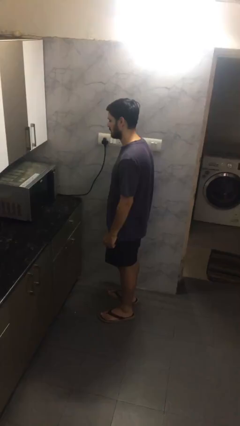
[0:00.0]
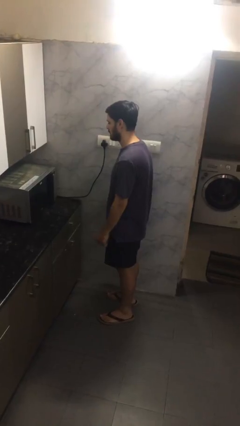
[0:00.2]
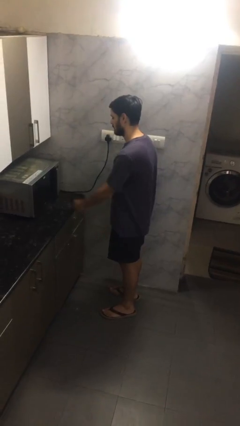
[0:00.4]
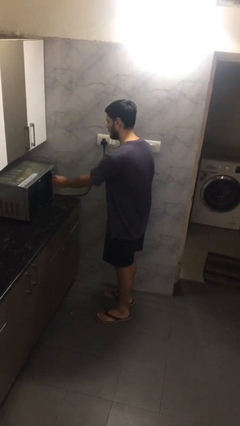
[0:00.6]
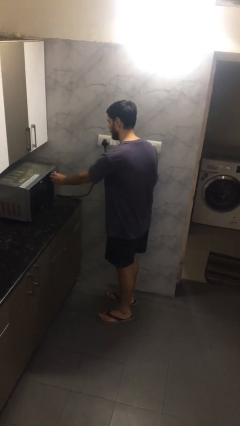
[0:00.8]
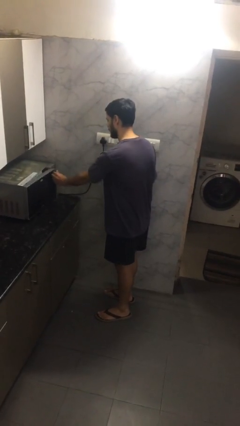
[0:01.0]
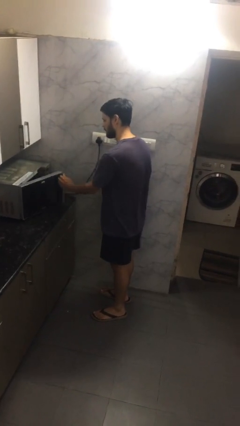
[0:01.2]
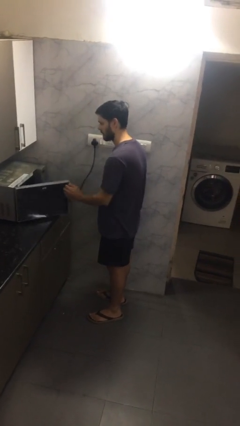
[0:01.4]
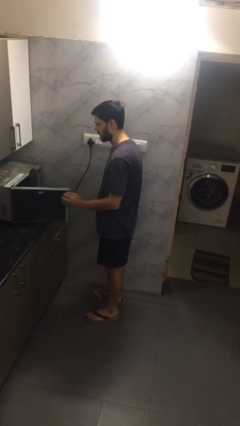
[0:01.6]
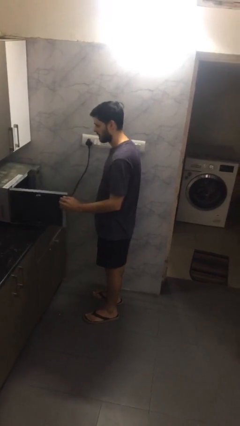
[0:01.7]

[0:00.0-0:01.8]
person opens microwave

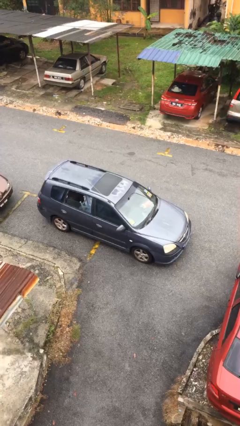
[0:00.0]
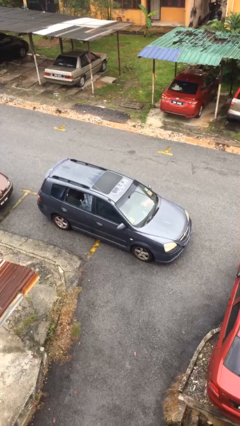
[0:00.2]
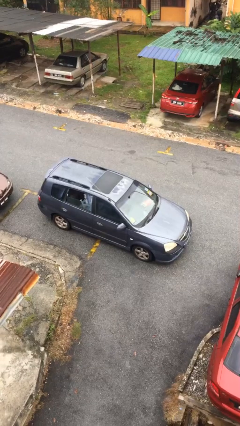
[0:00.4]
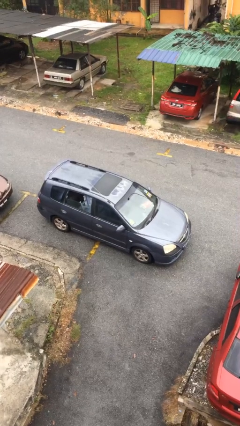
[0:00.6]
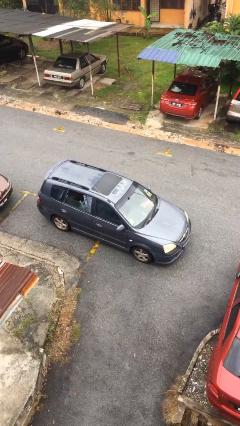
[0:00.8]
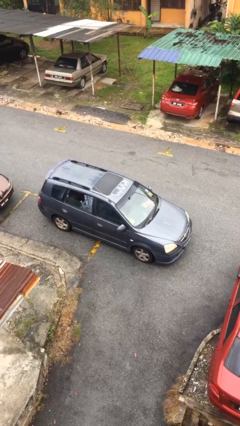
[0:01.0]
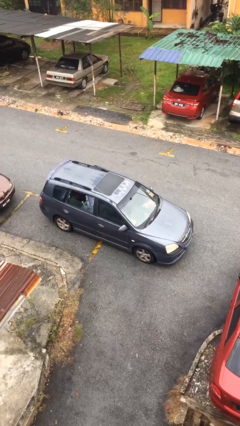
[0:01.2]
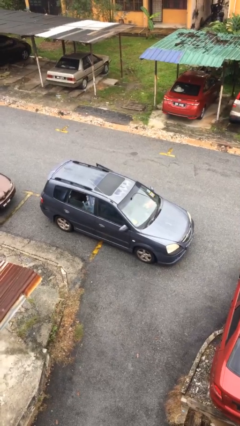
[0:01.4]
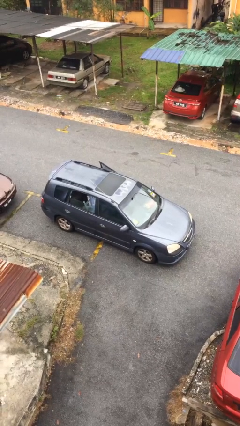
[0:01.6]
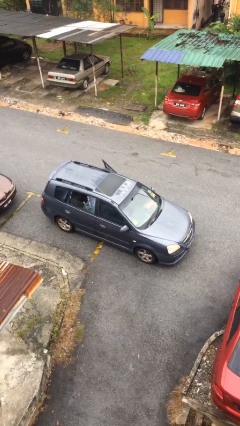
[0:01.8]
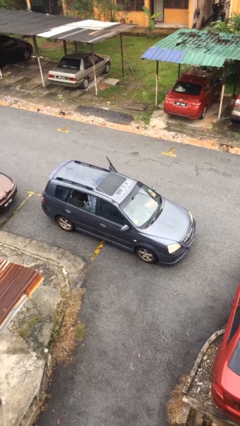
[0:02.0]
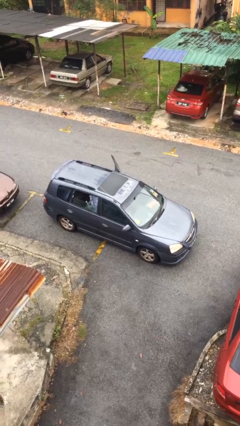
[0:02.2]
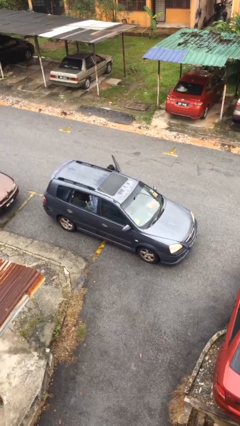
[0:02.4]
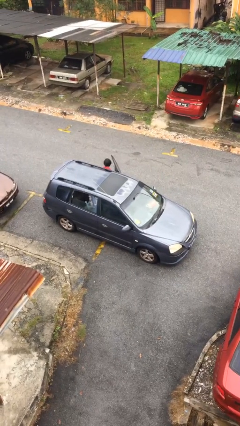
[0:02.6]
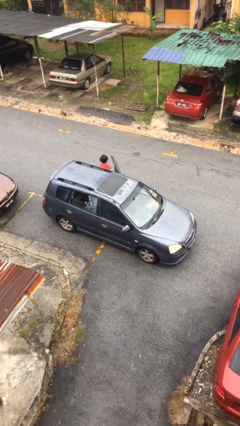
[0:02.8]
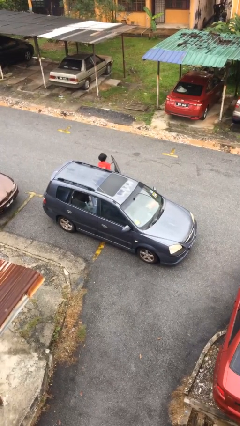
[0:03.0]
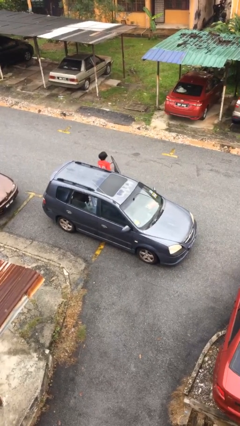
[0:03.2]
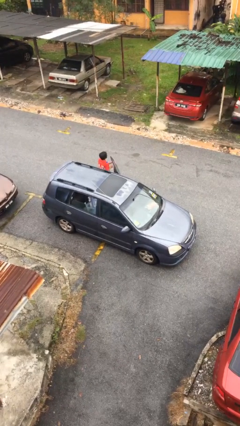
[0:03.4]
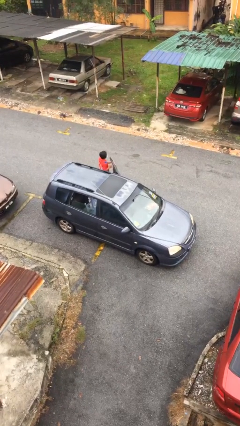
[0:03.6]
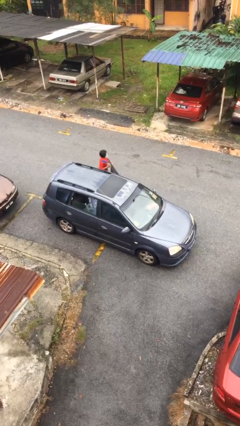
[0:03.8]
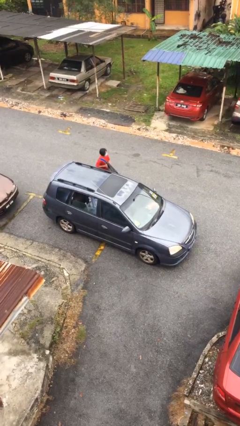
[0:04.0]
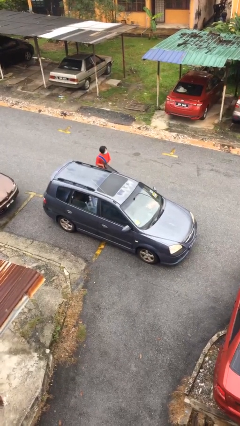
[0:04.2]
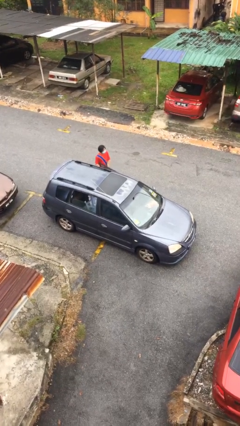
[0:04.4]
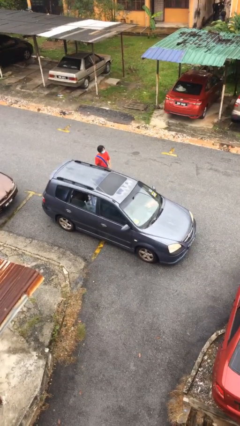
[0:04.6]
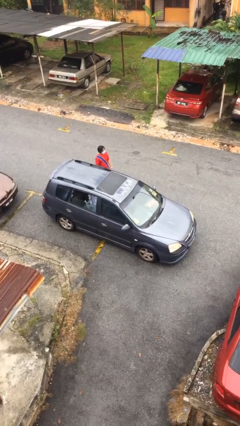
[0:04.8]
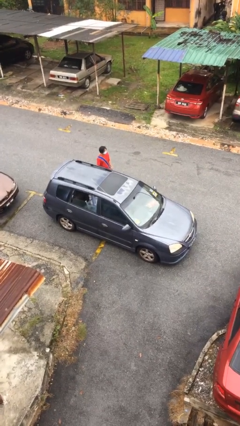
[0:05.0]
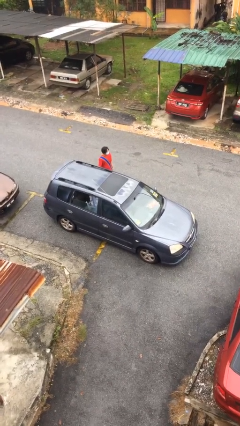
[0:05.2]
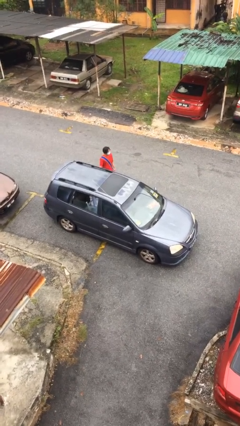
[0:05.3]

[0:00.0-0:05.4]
car drops off person

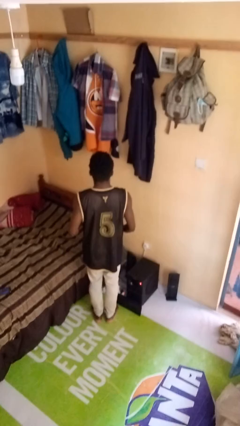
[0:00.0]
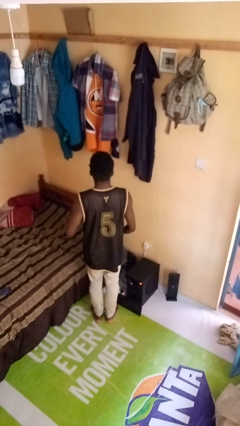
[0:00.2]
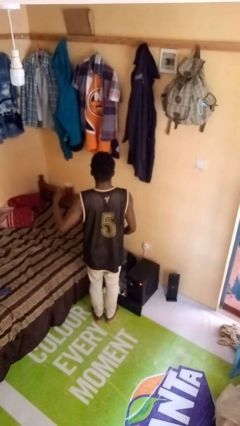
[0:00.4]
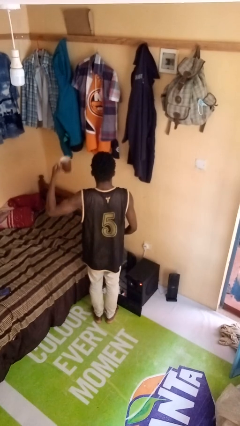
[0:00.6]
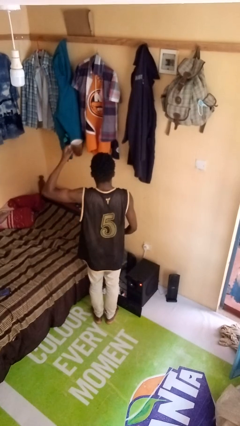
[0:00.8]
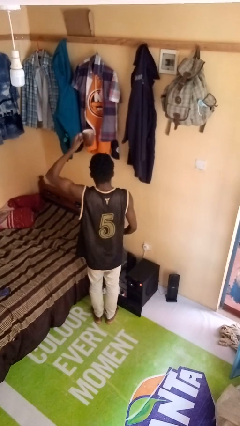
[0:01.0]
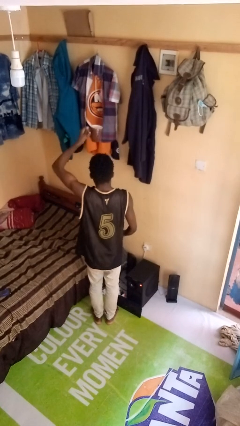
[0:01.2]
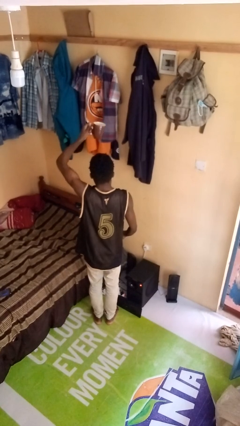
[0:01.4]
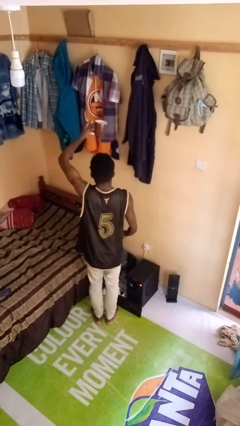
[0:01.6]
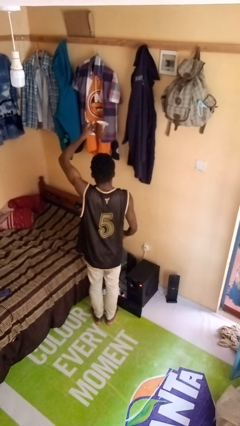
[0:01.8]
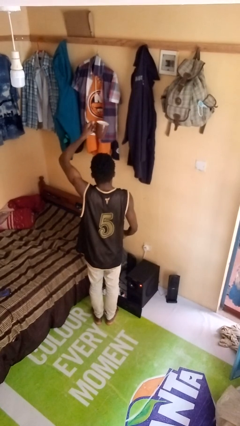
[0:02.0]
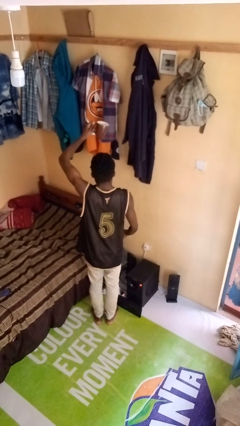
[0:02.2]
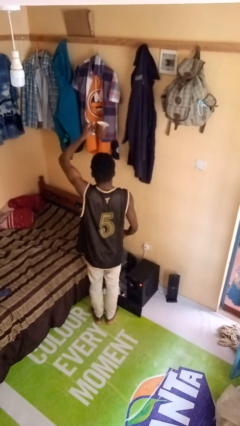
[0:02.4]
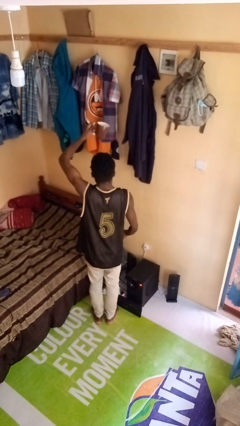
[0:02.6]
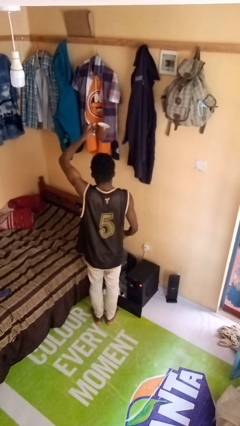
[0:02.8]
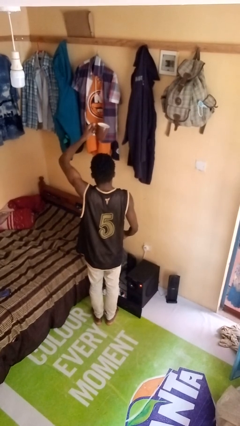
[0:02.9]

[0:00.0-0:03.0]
person holds object above head

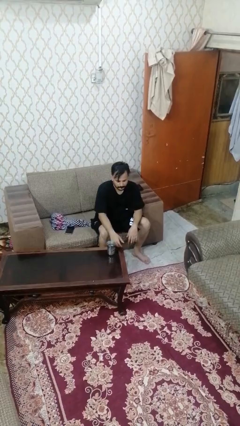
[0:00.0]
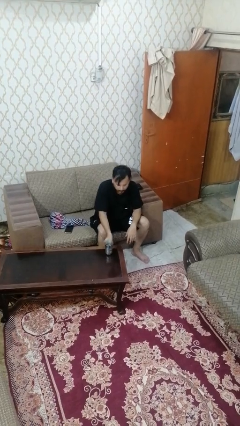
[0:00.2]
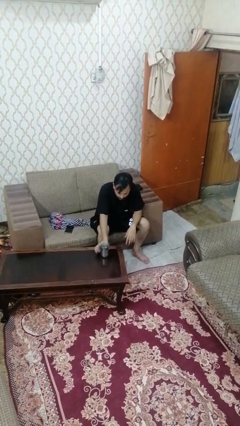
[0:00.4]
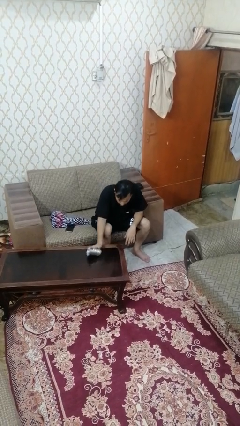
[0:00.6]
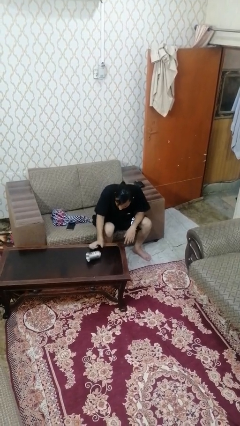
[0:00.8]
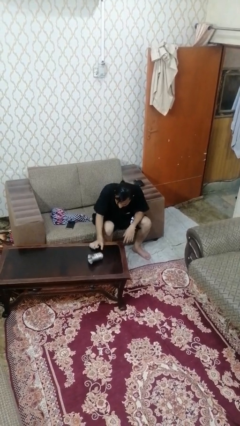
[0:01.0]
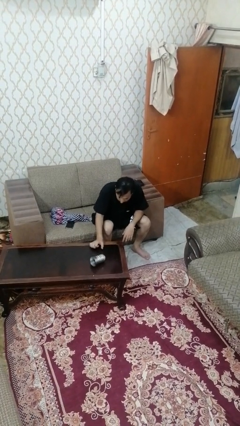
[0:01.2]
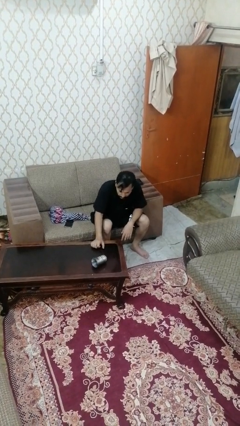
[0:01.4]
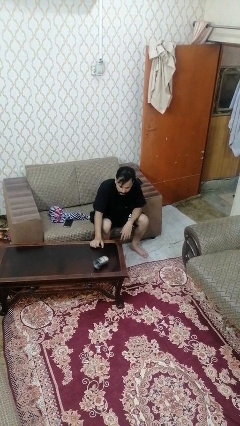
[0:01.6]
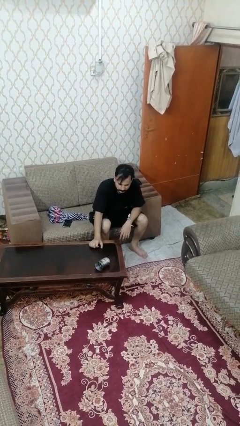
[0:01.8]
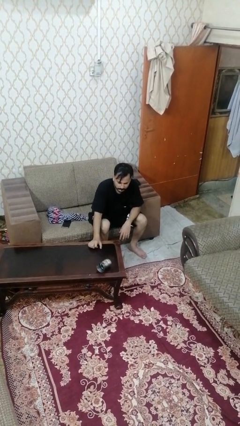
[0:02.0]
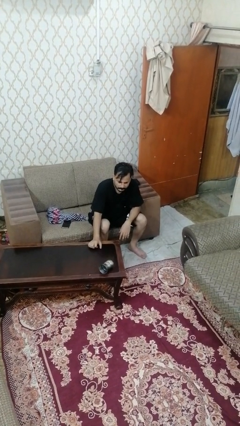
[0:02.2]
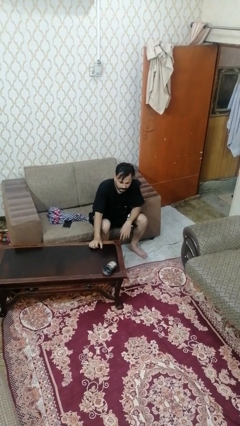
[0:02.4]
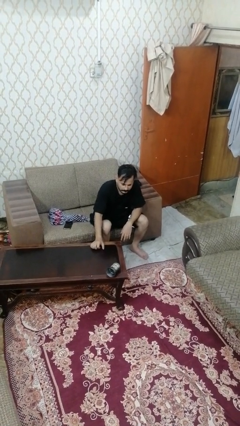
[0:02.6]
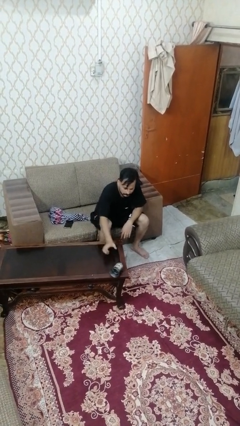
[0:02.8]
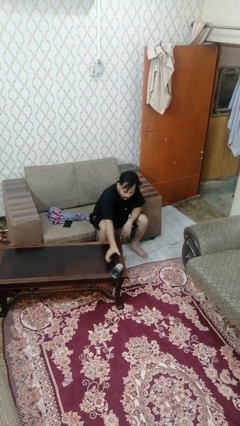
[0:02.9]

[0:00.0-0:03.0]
person knocks over glass

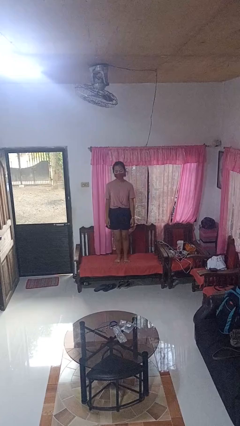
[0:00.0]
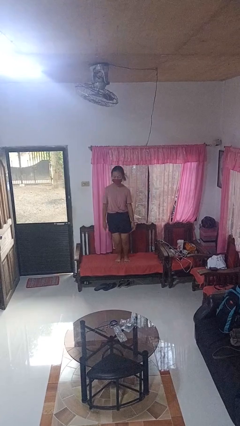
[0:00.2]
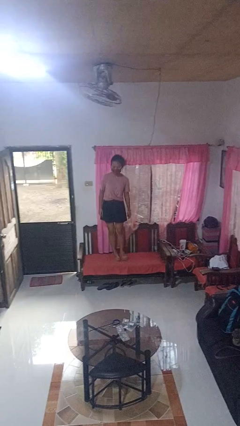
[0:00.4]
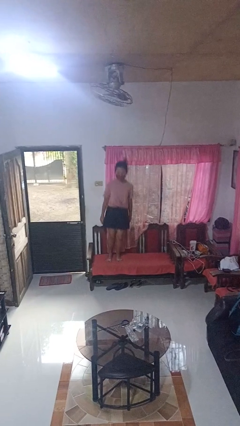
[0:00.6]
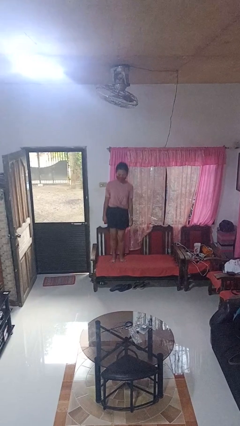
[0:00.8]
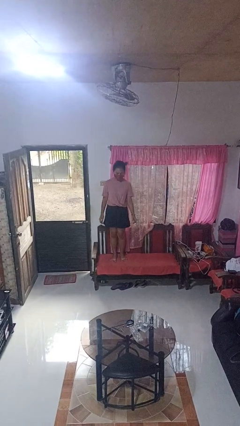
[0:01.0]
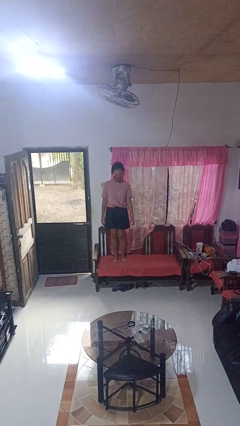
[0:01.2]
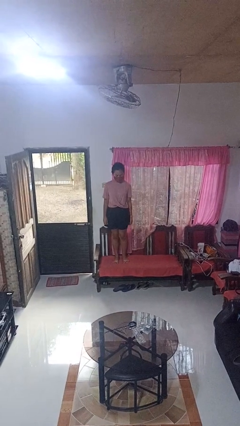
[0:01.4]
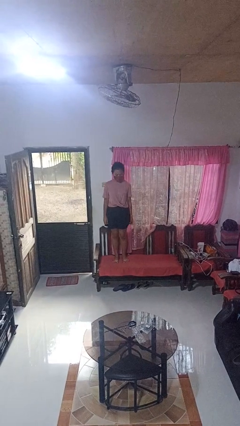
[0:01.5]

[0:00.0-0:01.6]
person jumps on couch

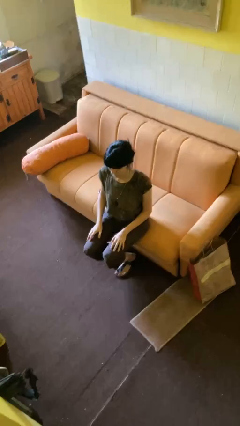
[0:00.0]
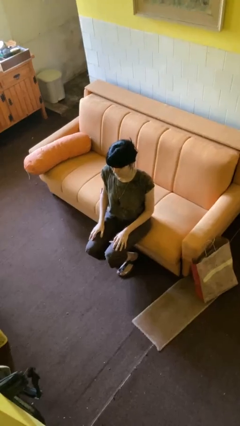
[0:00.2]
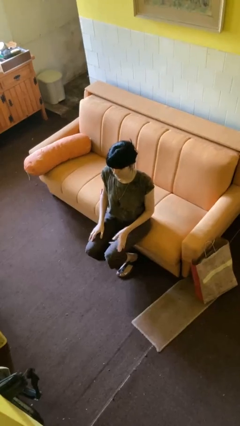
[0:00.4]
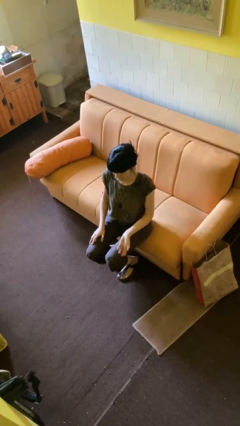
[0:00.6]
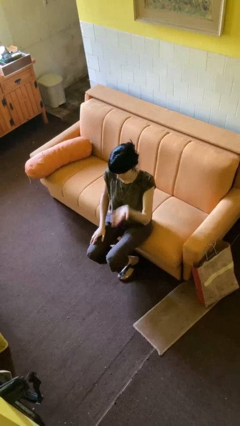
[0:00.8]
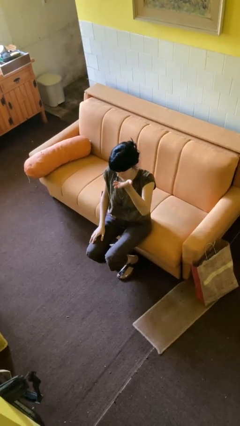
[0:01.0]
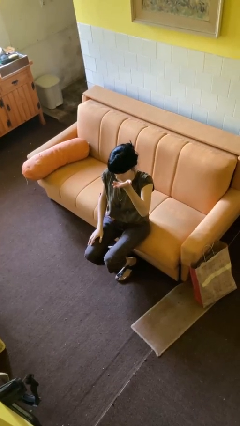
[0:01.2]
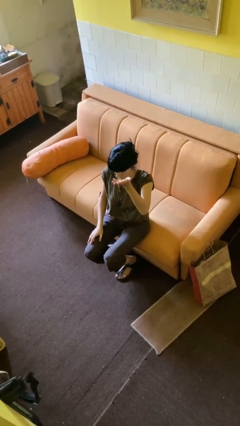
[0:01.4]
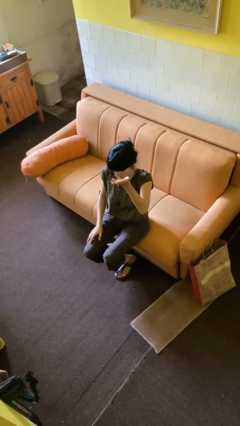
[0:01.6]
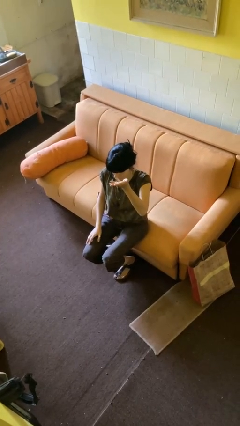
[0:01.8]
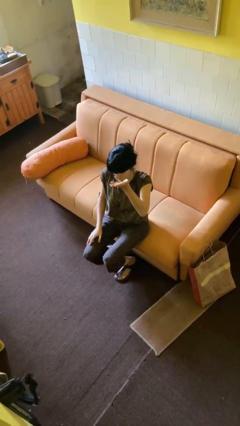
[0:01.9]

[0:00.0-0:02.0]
person gestures swipe up

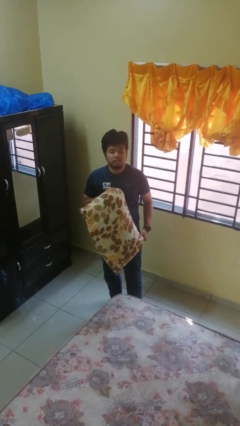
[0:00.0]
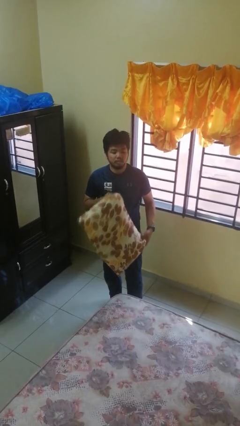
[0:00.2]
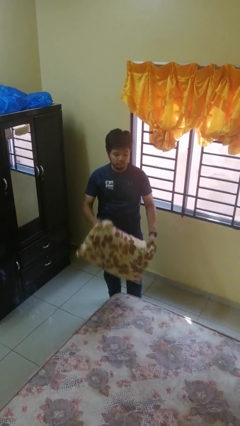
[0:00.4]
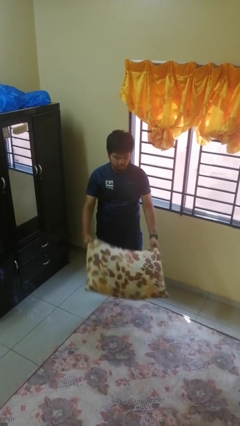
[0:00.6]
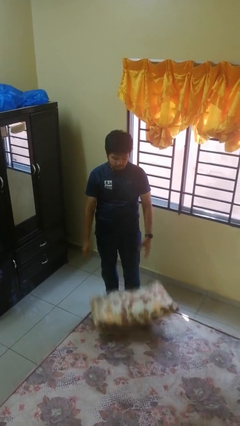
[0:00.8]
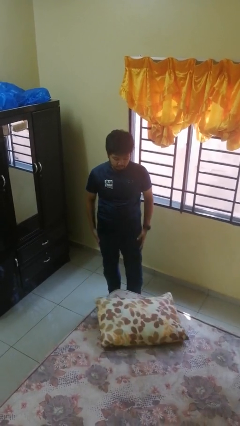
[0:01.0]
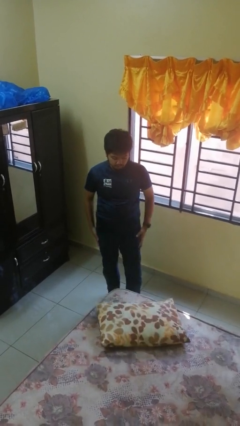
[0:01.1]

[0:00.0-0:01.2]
person puts down object on bed
